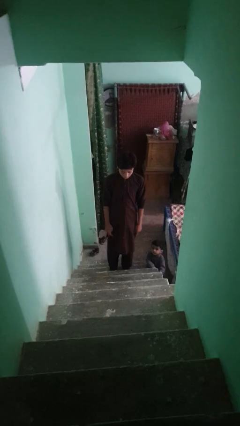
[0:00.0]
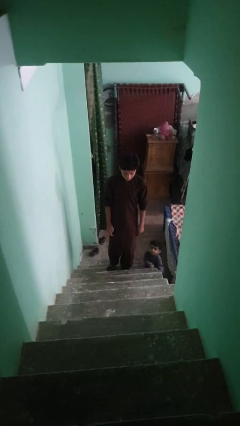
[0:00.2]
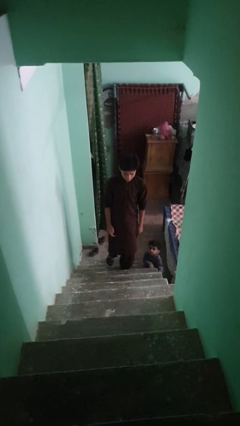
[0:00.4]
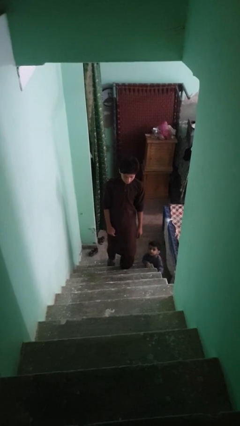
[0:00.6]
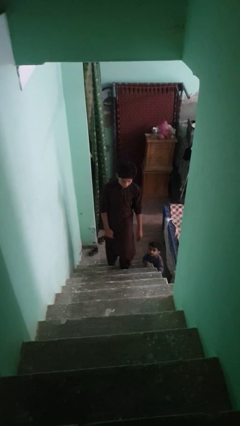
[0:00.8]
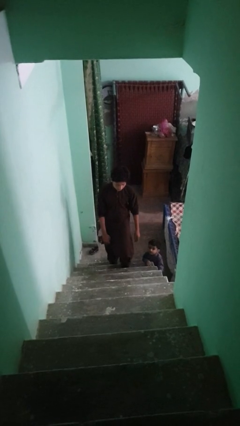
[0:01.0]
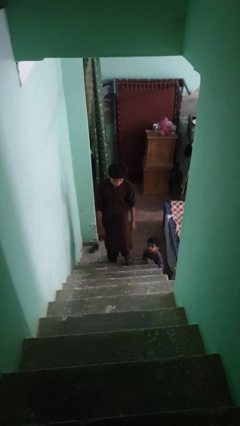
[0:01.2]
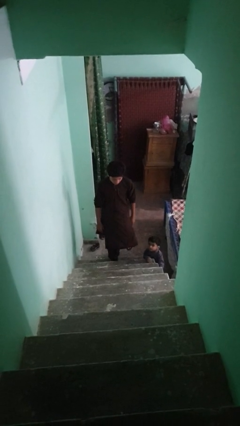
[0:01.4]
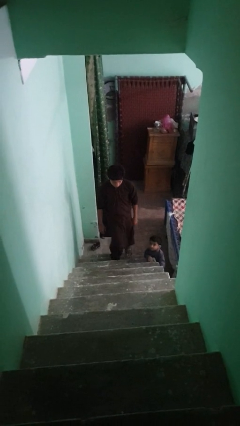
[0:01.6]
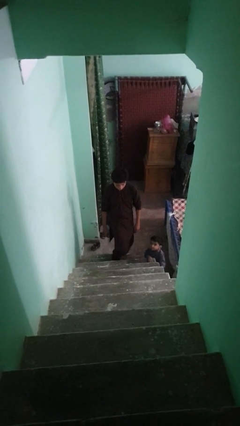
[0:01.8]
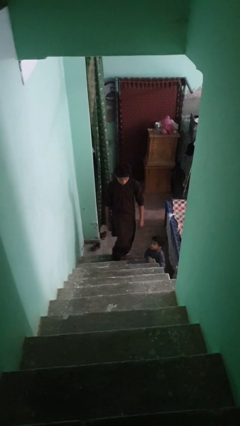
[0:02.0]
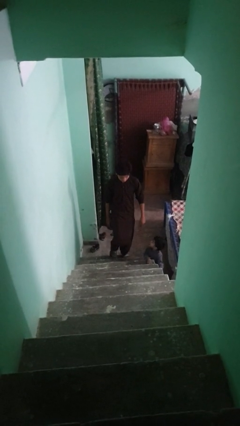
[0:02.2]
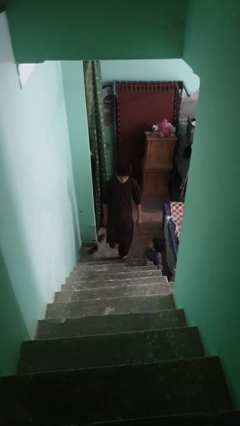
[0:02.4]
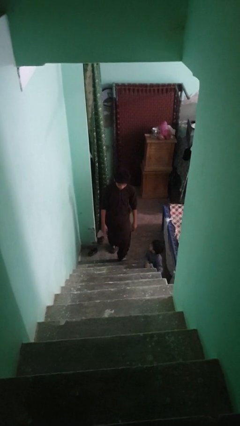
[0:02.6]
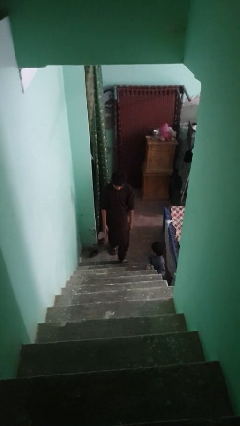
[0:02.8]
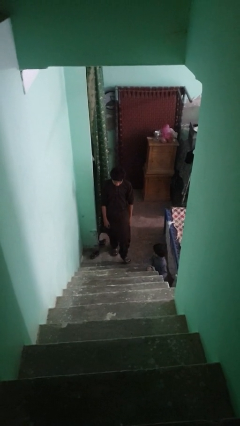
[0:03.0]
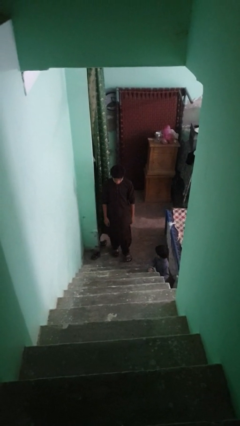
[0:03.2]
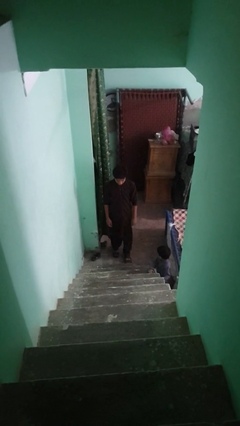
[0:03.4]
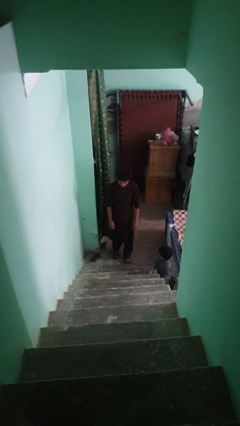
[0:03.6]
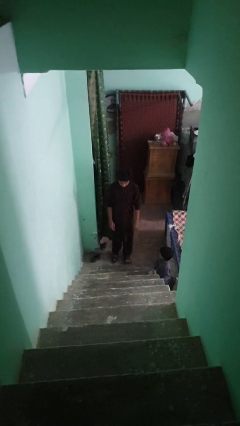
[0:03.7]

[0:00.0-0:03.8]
person climbs down stairs

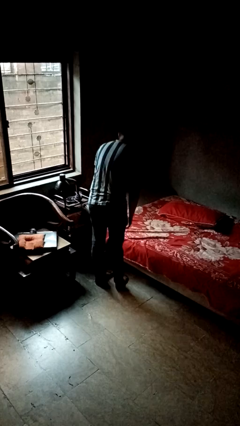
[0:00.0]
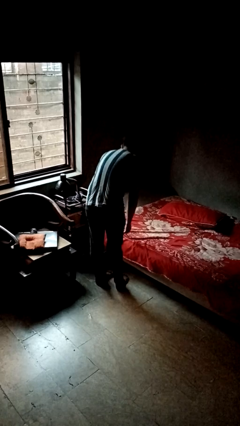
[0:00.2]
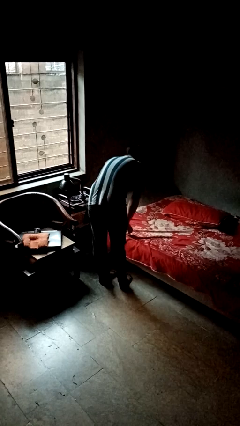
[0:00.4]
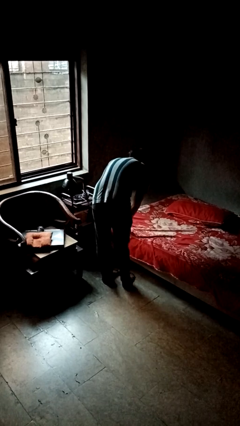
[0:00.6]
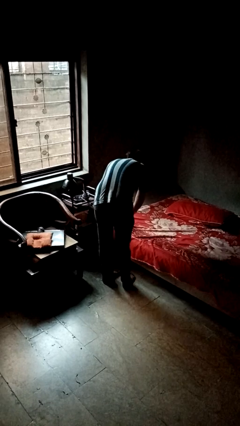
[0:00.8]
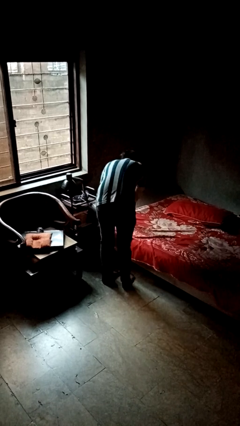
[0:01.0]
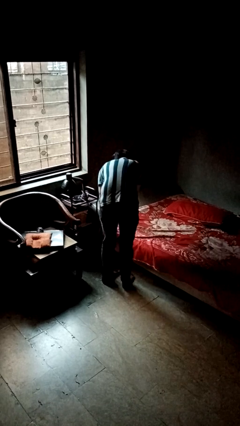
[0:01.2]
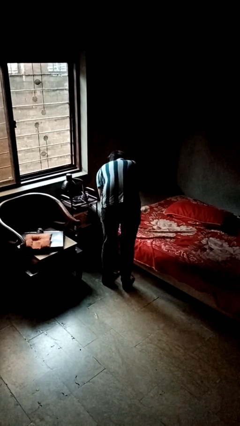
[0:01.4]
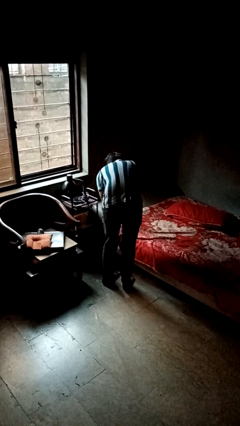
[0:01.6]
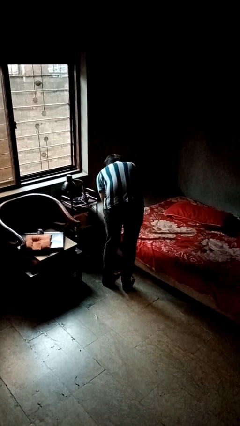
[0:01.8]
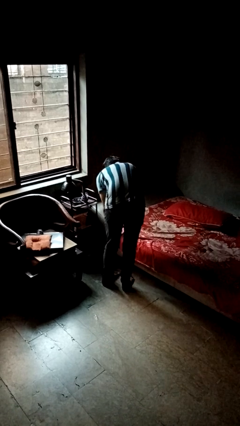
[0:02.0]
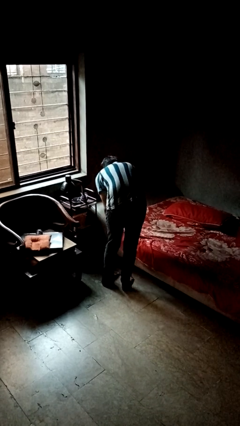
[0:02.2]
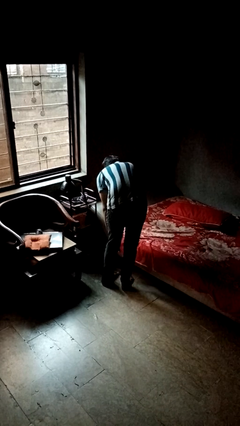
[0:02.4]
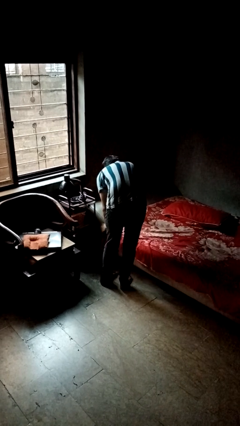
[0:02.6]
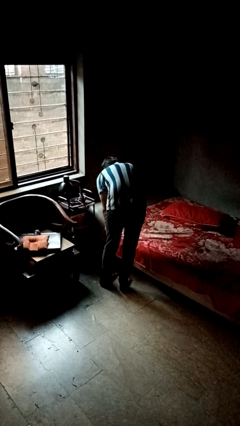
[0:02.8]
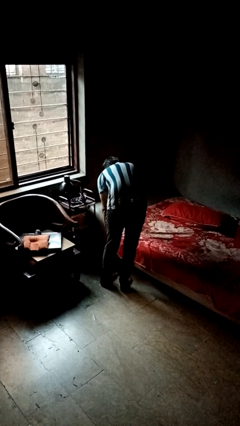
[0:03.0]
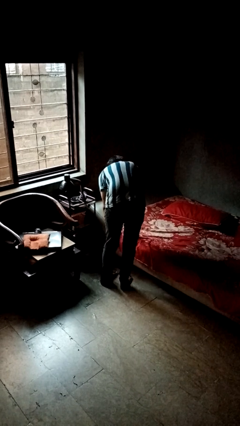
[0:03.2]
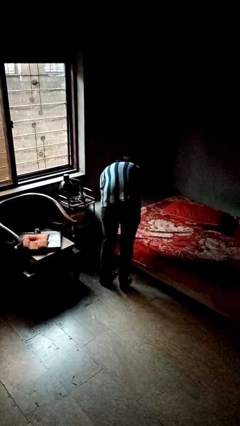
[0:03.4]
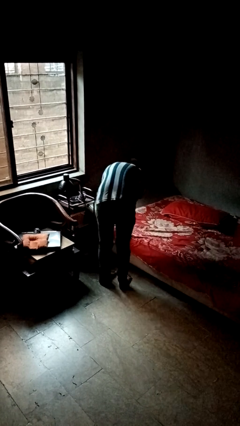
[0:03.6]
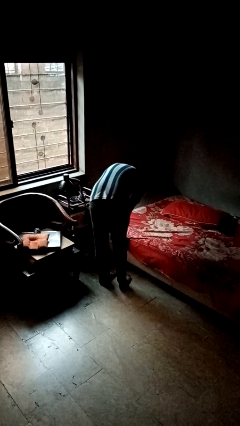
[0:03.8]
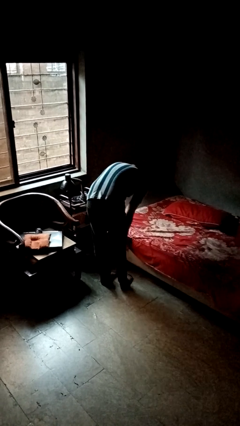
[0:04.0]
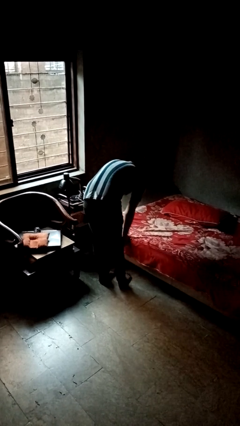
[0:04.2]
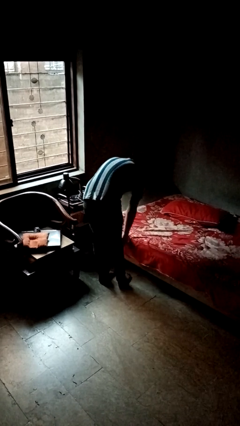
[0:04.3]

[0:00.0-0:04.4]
person makes bed

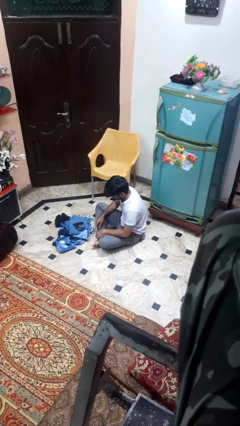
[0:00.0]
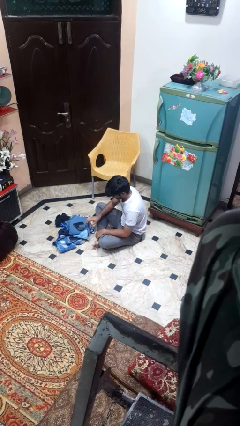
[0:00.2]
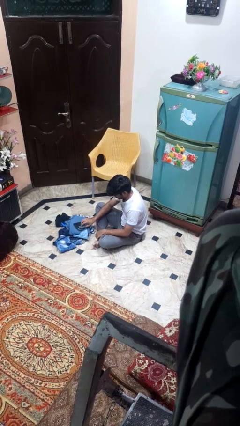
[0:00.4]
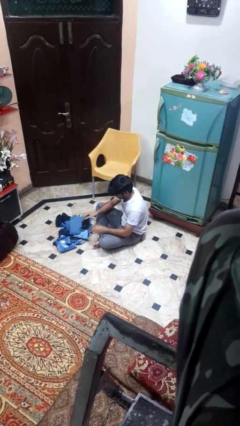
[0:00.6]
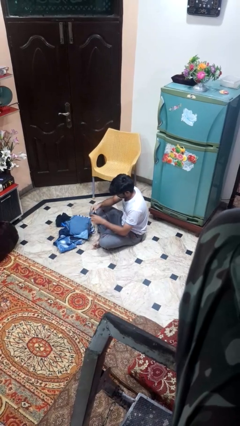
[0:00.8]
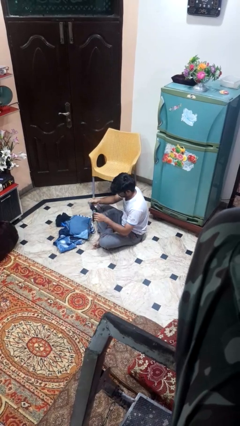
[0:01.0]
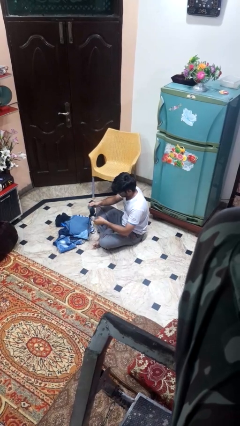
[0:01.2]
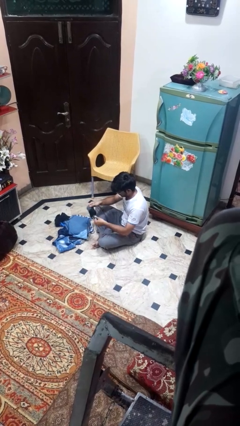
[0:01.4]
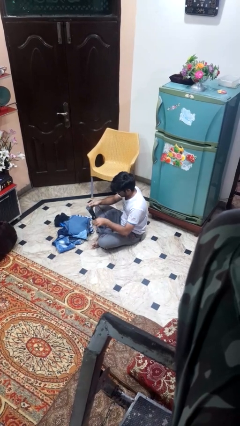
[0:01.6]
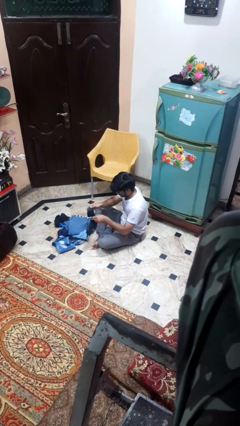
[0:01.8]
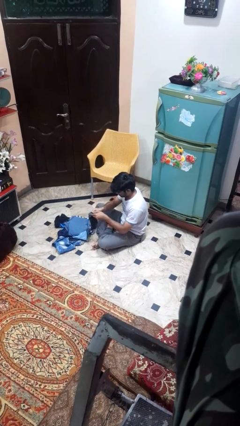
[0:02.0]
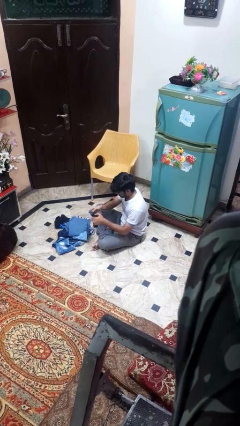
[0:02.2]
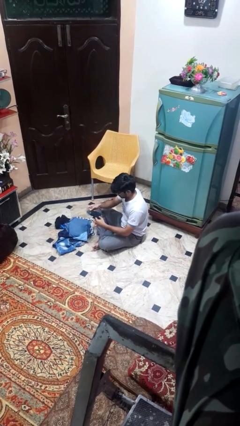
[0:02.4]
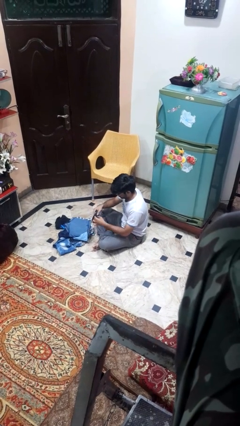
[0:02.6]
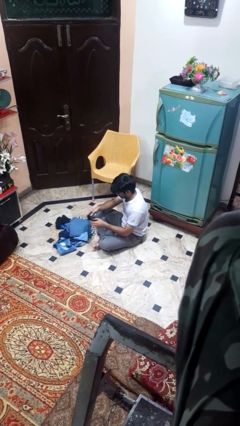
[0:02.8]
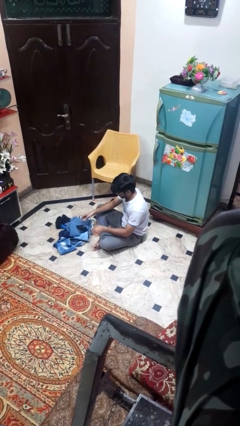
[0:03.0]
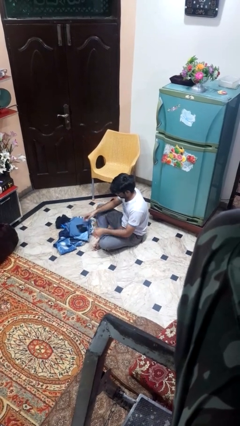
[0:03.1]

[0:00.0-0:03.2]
person folds socks

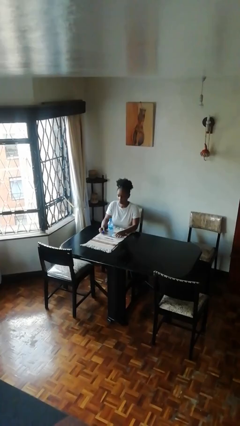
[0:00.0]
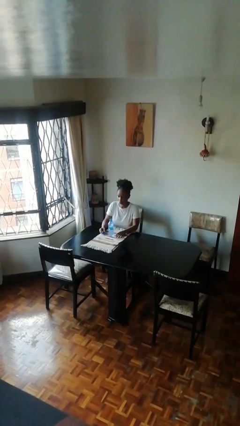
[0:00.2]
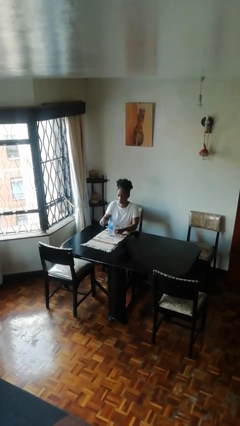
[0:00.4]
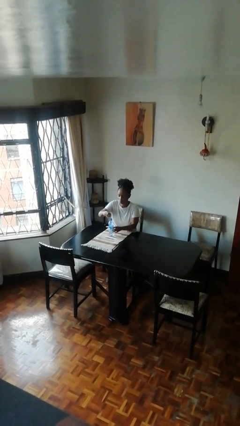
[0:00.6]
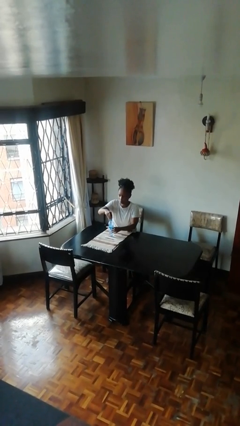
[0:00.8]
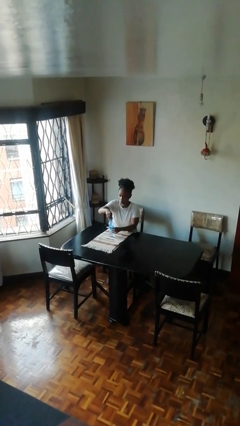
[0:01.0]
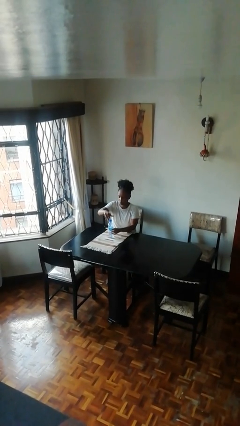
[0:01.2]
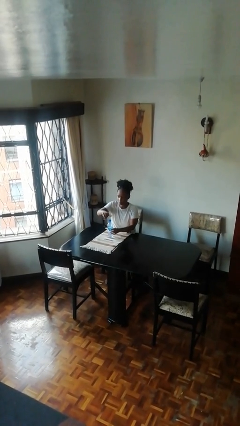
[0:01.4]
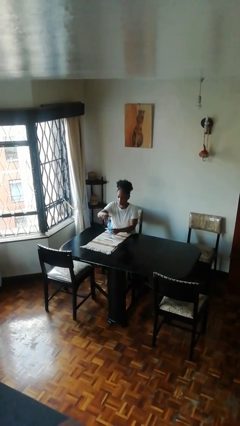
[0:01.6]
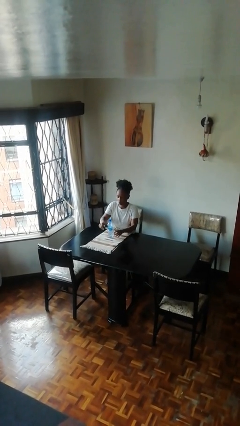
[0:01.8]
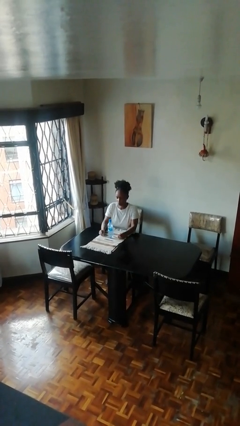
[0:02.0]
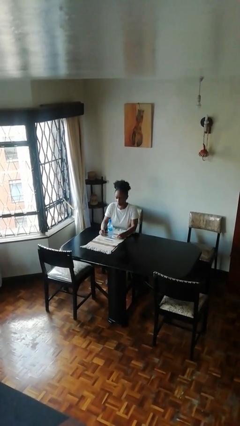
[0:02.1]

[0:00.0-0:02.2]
person screws lid to bottle

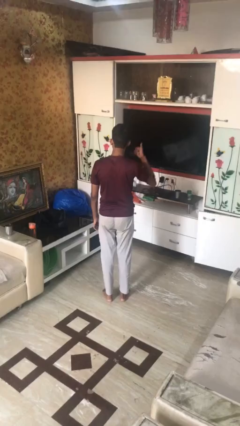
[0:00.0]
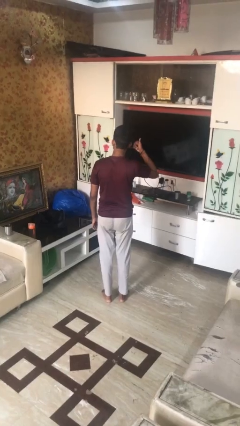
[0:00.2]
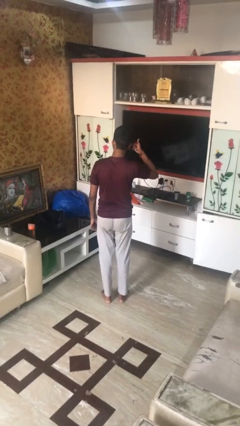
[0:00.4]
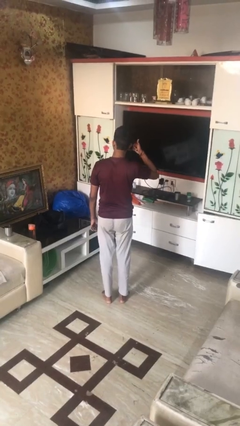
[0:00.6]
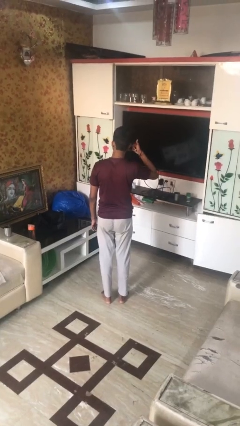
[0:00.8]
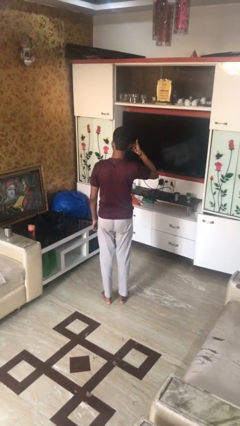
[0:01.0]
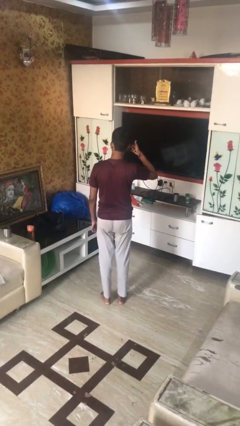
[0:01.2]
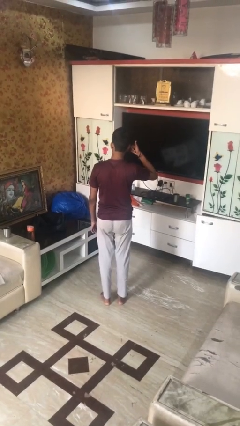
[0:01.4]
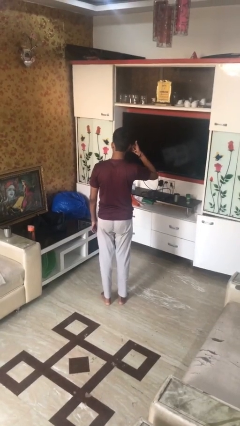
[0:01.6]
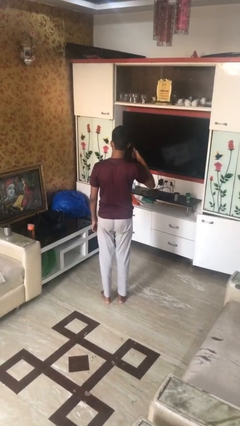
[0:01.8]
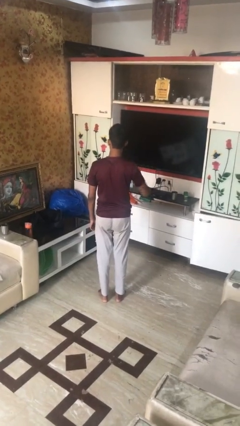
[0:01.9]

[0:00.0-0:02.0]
person gestures call me

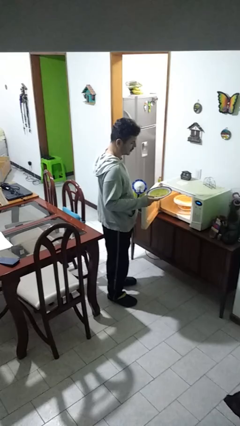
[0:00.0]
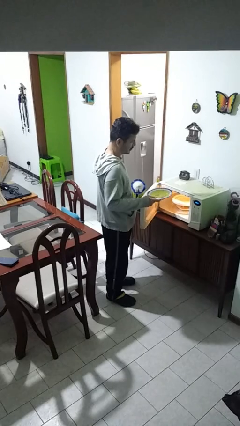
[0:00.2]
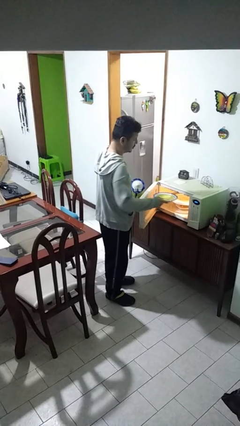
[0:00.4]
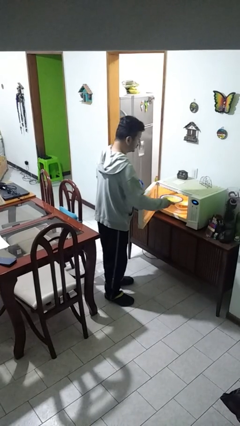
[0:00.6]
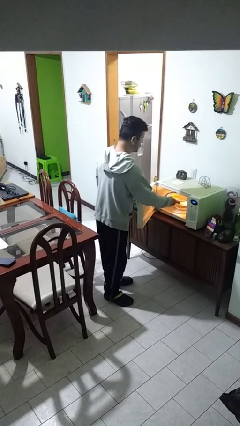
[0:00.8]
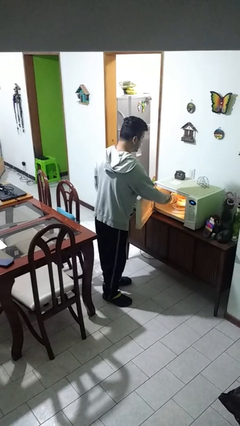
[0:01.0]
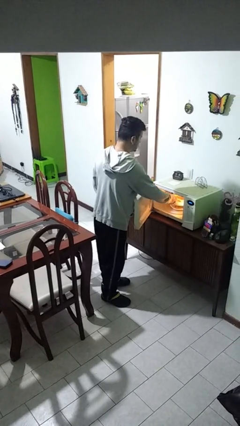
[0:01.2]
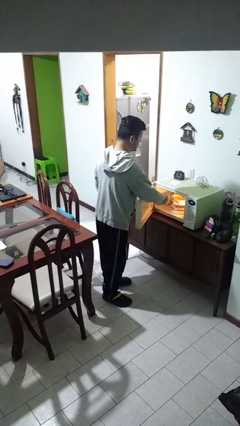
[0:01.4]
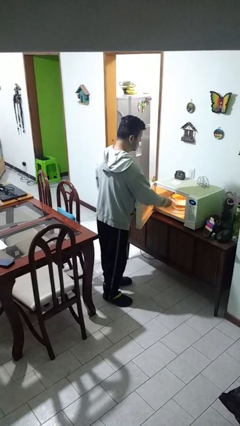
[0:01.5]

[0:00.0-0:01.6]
person puts object into microwave

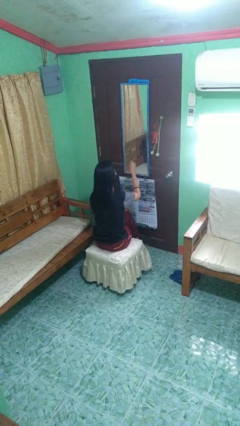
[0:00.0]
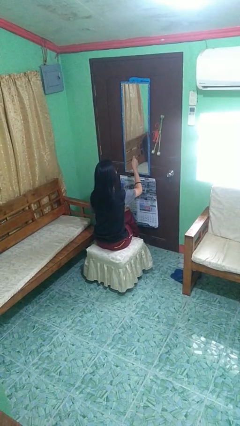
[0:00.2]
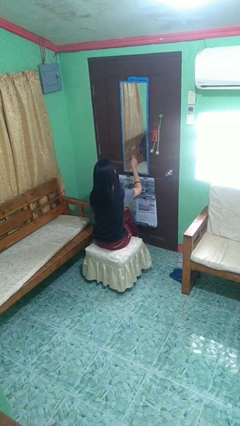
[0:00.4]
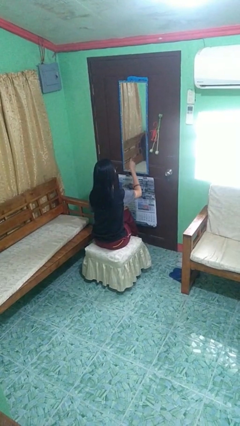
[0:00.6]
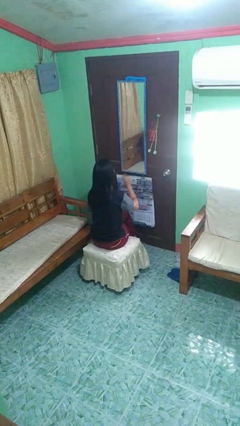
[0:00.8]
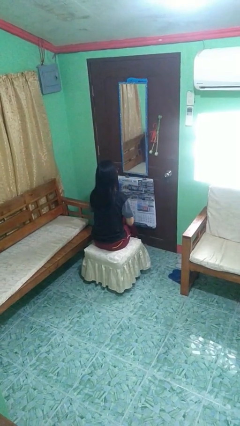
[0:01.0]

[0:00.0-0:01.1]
person gestures thumbs up
